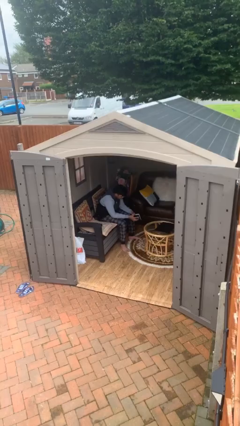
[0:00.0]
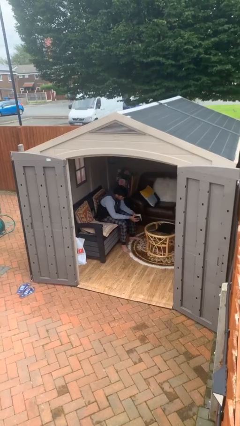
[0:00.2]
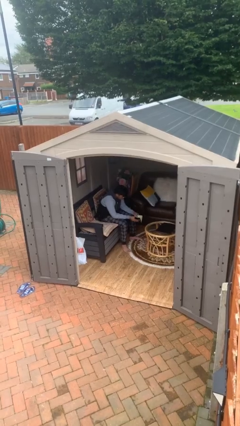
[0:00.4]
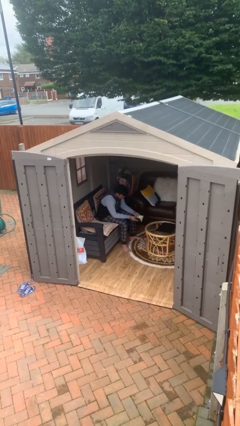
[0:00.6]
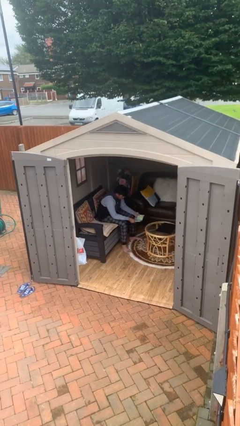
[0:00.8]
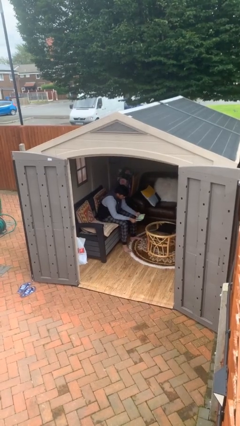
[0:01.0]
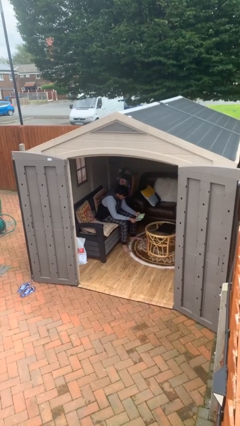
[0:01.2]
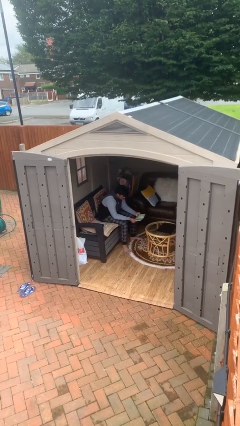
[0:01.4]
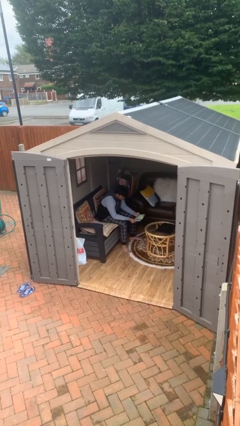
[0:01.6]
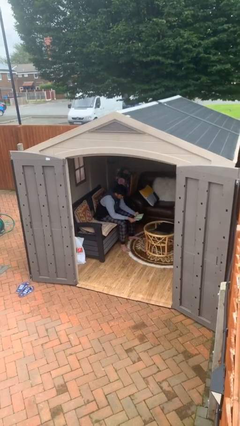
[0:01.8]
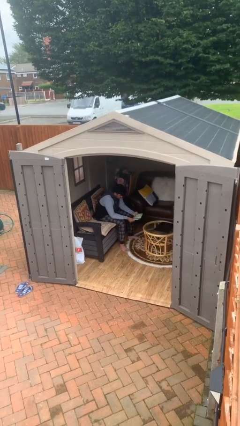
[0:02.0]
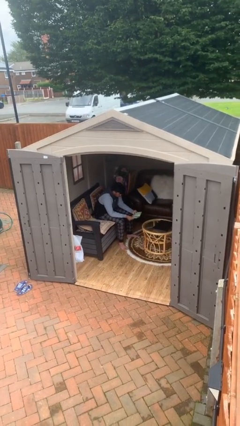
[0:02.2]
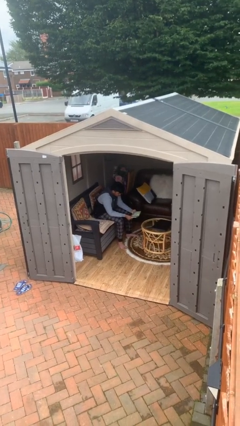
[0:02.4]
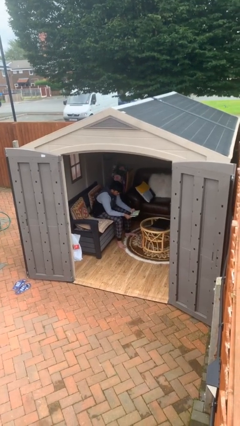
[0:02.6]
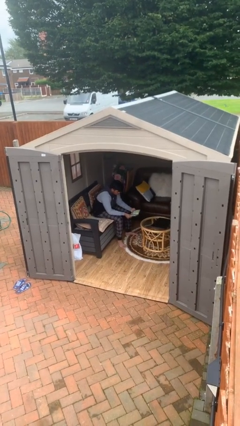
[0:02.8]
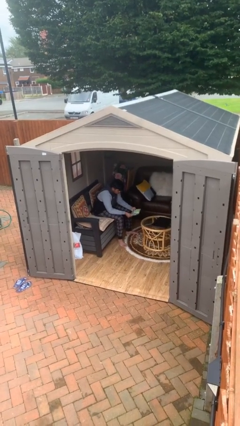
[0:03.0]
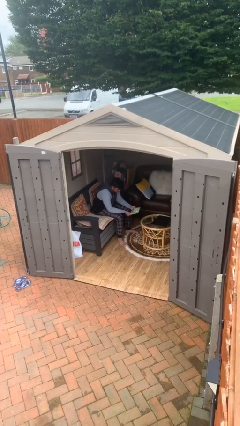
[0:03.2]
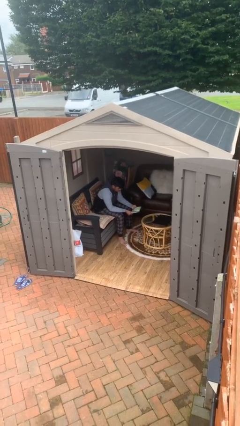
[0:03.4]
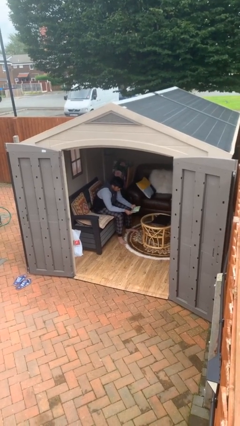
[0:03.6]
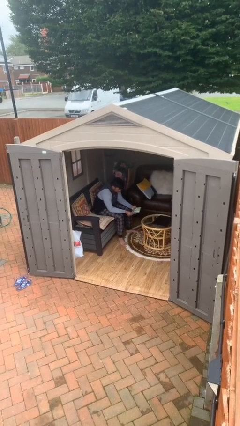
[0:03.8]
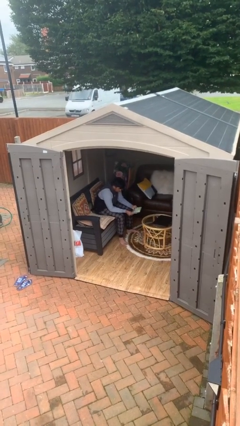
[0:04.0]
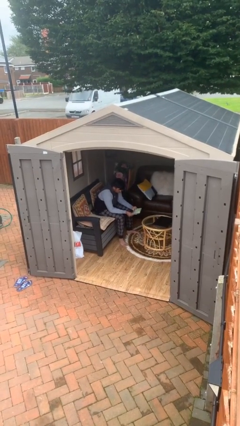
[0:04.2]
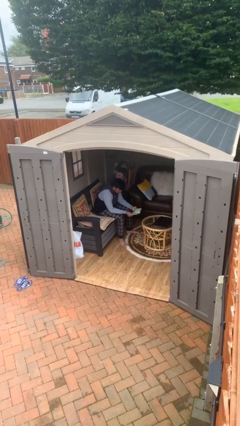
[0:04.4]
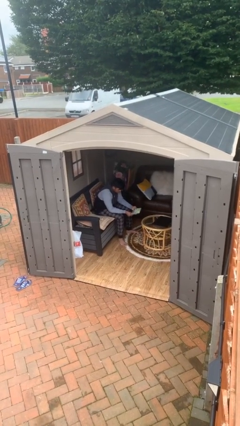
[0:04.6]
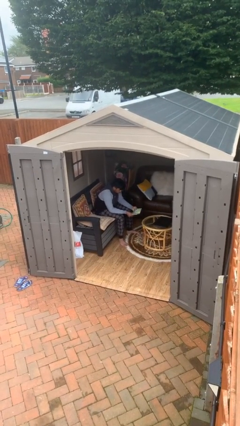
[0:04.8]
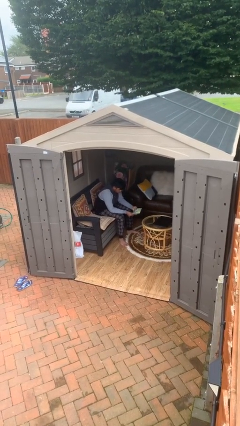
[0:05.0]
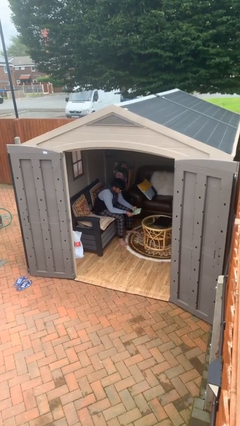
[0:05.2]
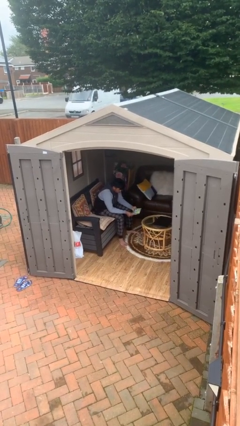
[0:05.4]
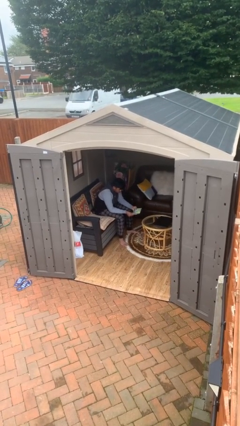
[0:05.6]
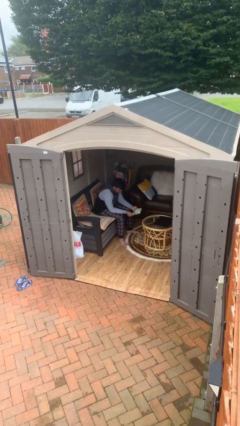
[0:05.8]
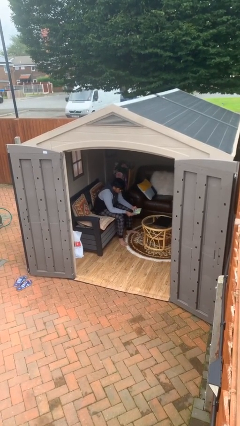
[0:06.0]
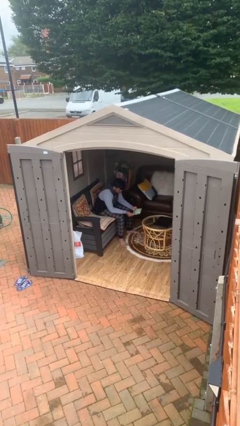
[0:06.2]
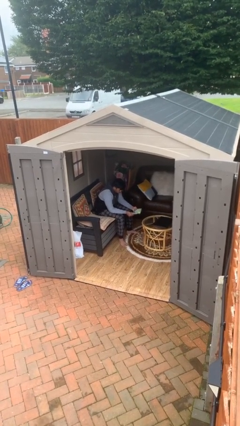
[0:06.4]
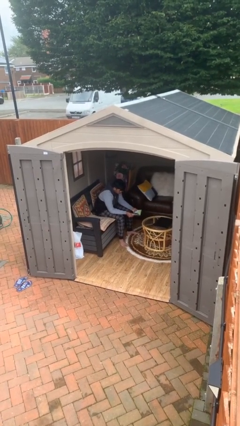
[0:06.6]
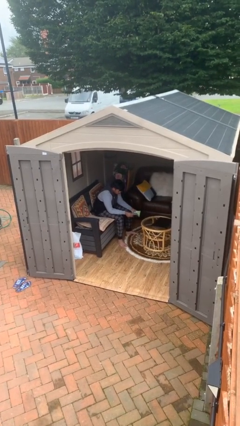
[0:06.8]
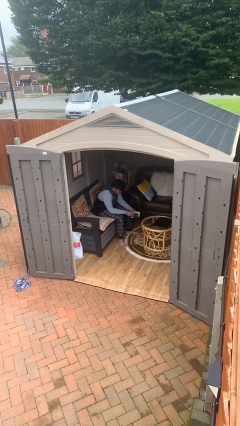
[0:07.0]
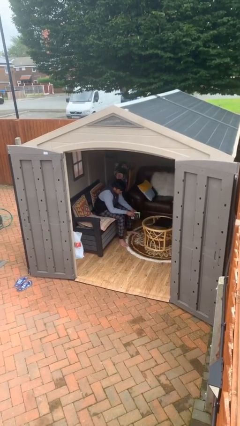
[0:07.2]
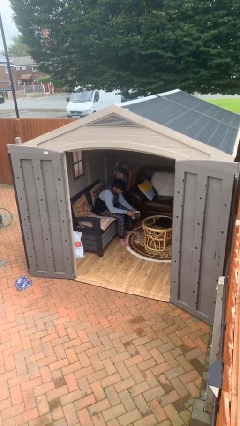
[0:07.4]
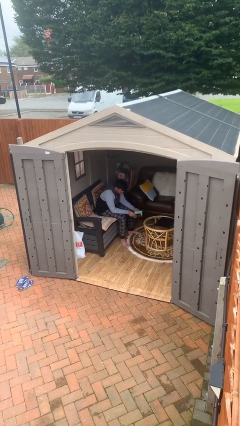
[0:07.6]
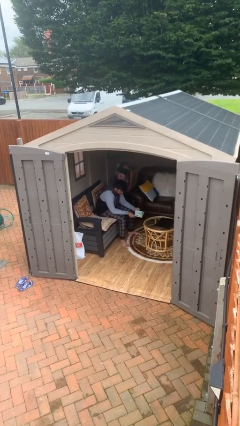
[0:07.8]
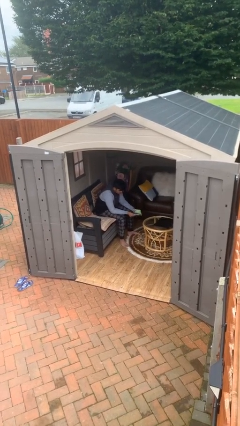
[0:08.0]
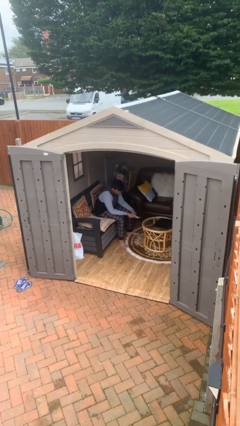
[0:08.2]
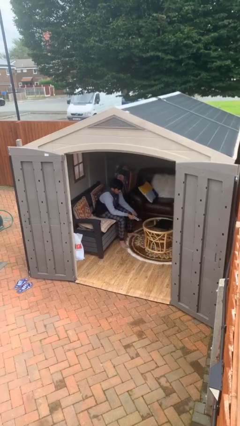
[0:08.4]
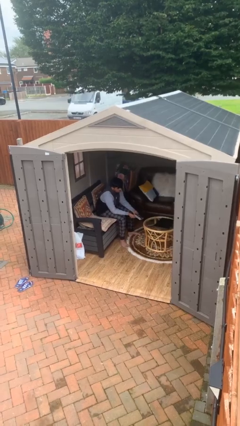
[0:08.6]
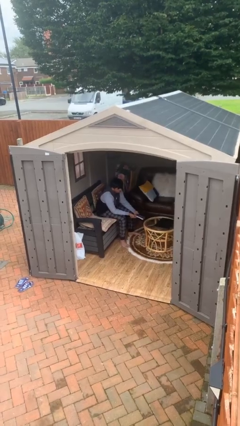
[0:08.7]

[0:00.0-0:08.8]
person reads document

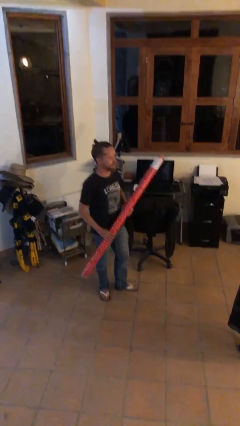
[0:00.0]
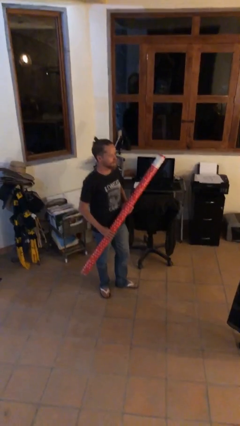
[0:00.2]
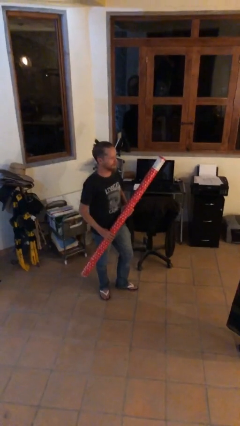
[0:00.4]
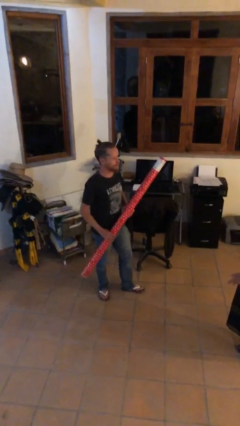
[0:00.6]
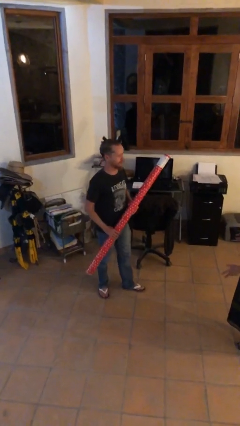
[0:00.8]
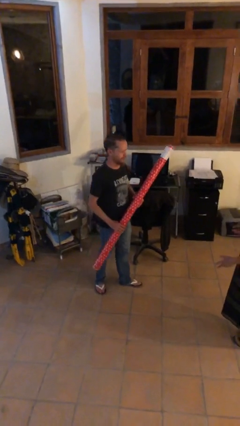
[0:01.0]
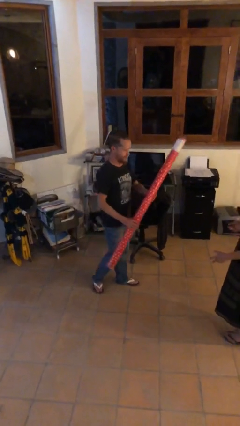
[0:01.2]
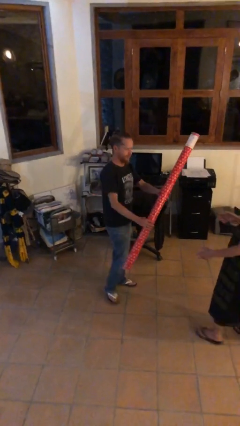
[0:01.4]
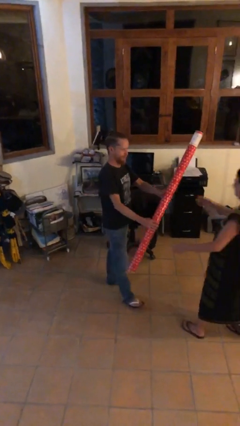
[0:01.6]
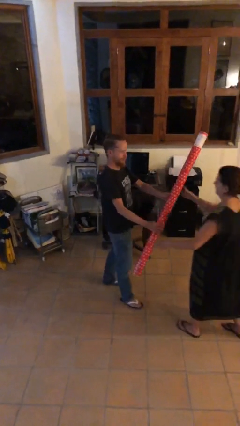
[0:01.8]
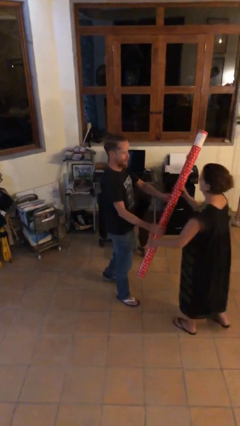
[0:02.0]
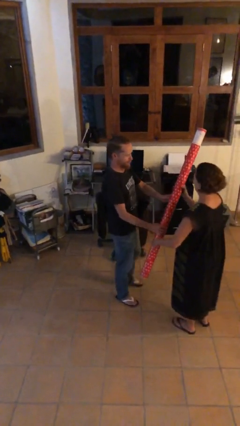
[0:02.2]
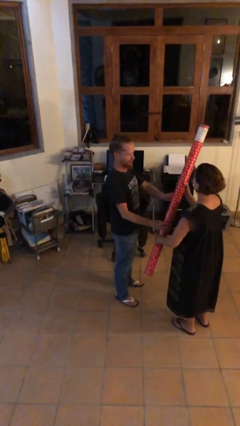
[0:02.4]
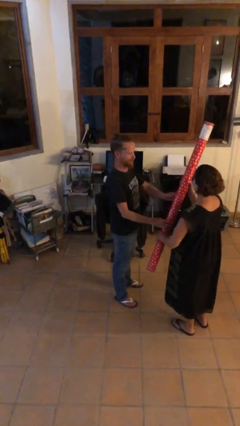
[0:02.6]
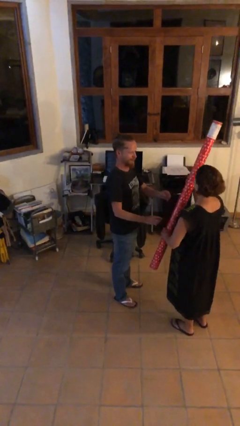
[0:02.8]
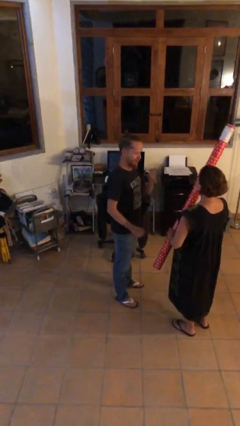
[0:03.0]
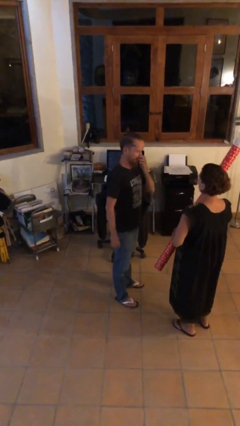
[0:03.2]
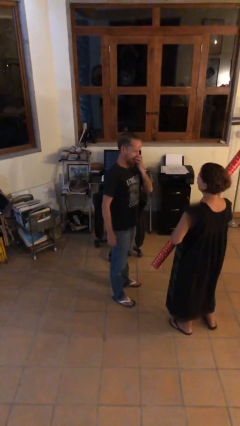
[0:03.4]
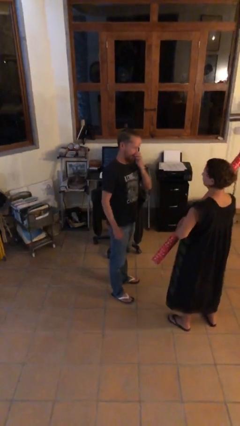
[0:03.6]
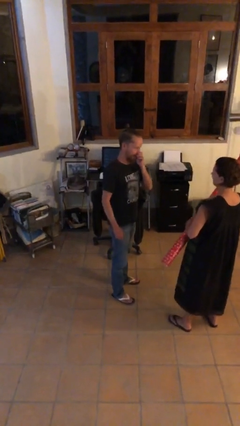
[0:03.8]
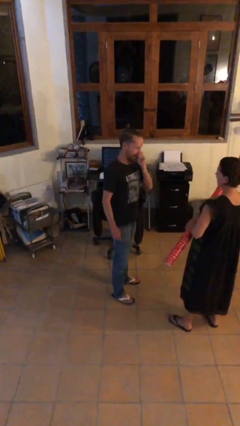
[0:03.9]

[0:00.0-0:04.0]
person transfers object to person

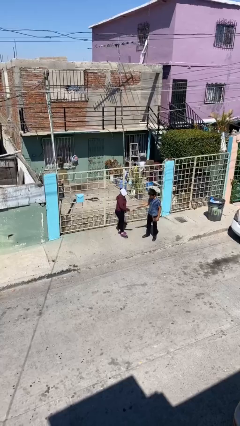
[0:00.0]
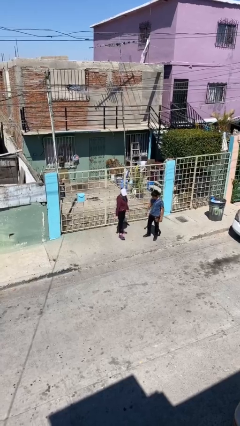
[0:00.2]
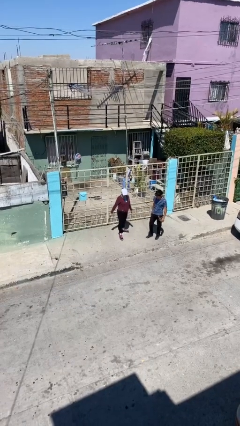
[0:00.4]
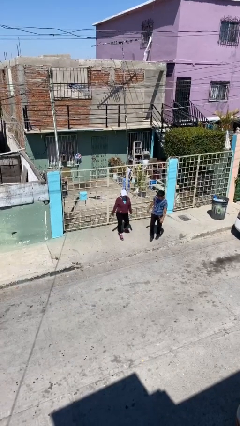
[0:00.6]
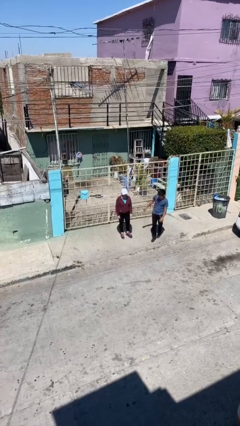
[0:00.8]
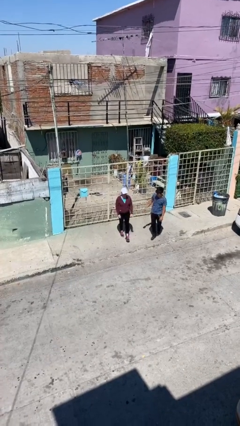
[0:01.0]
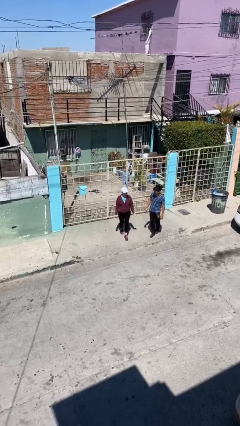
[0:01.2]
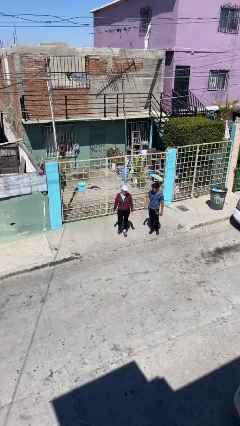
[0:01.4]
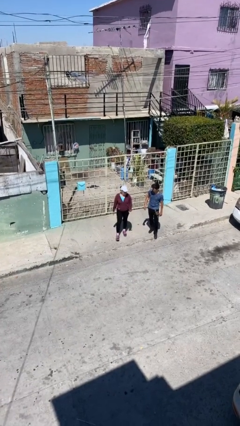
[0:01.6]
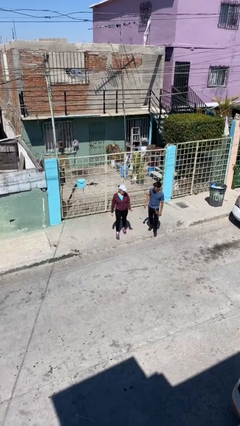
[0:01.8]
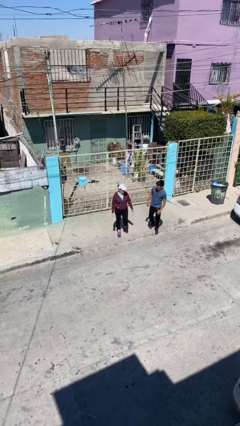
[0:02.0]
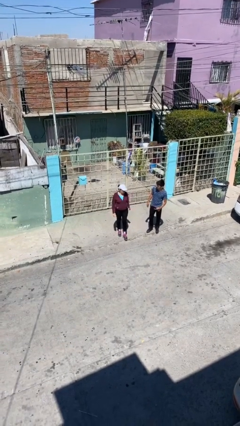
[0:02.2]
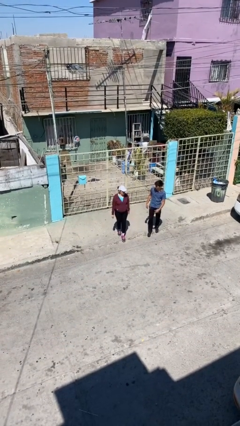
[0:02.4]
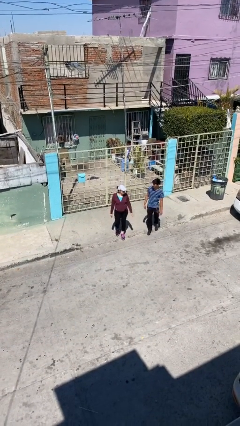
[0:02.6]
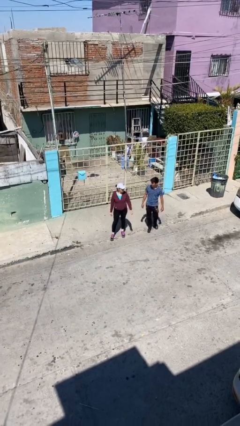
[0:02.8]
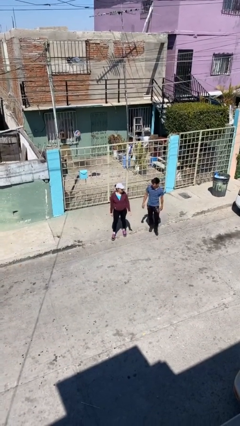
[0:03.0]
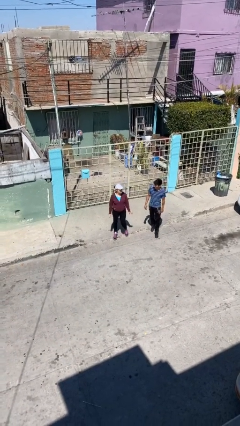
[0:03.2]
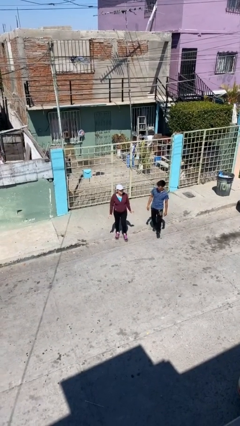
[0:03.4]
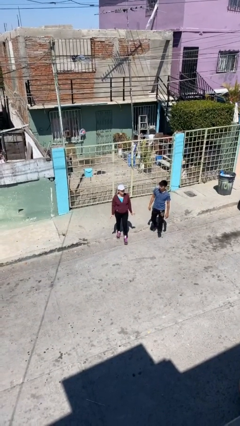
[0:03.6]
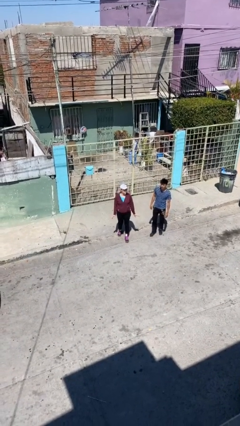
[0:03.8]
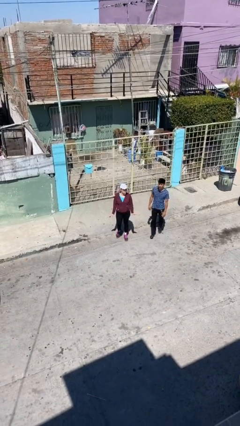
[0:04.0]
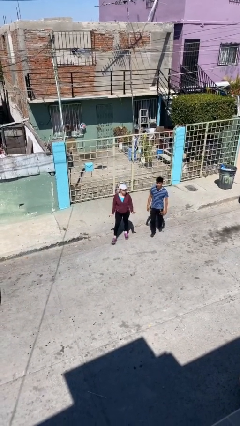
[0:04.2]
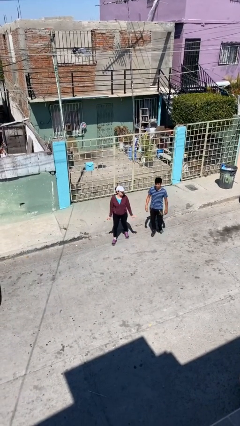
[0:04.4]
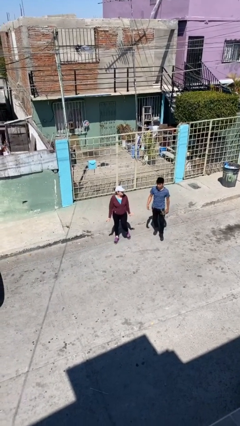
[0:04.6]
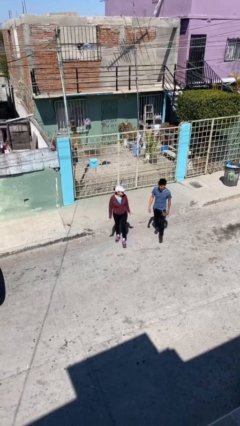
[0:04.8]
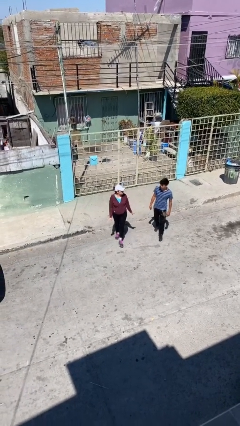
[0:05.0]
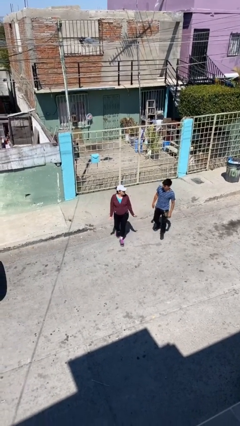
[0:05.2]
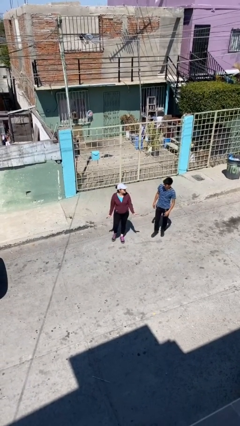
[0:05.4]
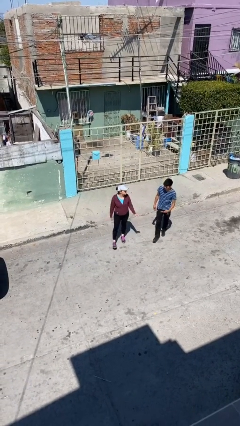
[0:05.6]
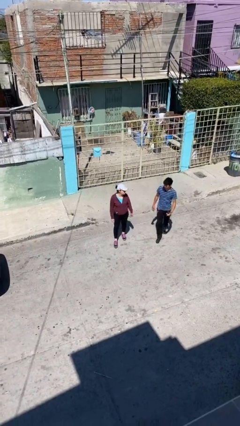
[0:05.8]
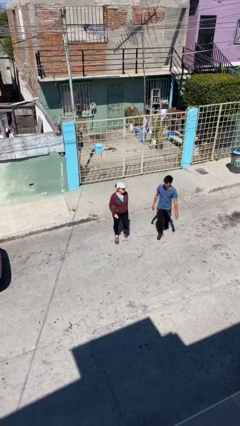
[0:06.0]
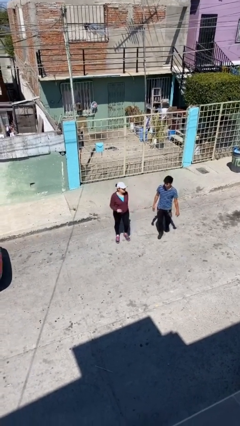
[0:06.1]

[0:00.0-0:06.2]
person talks to person
